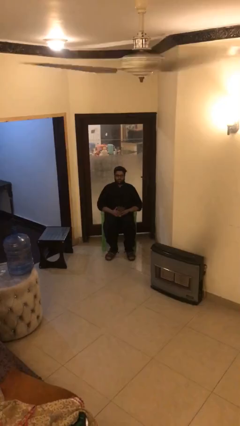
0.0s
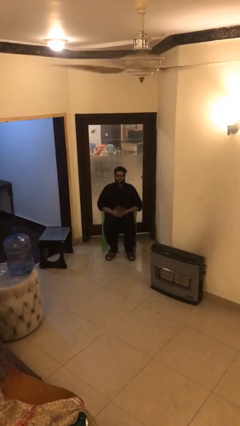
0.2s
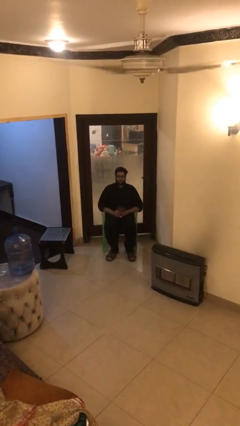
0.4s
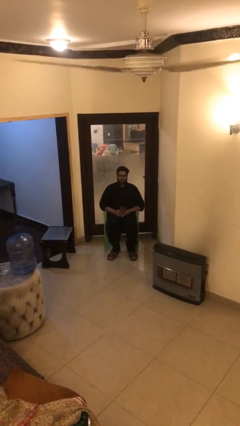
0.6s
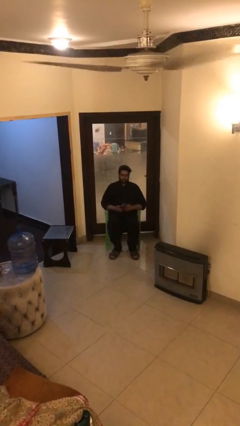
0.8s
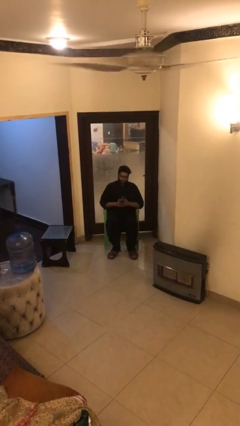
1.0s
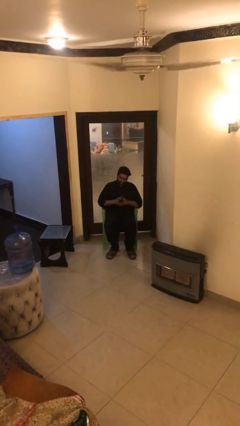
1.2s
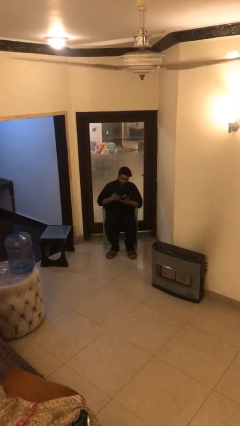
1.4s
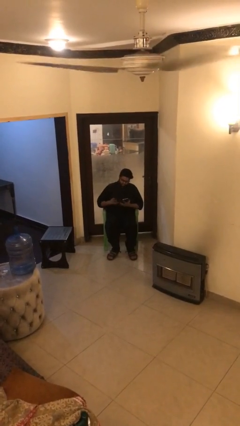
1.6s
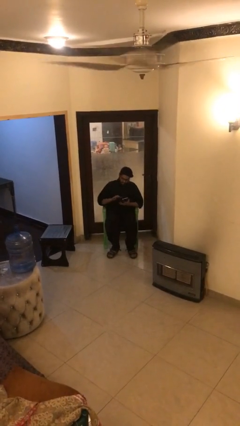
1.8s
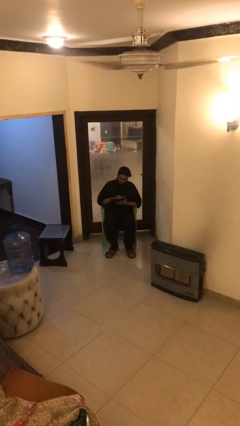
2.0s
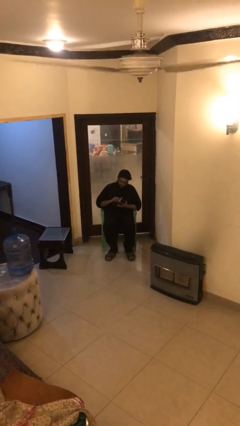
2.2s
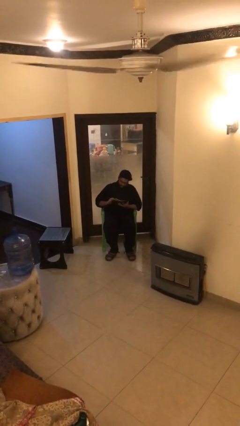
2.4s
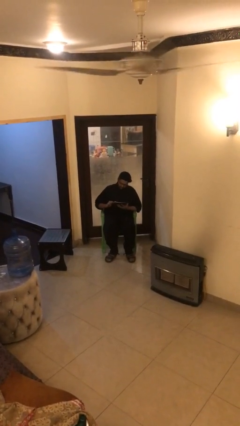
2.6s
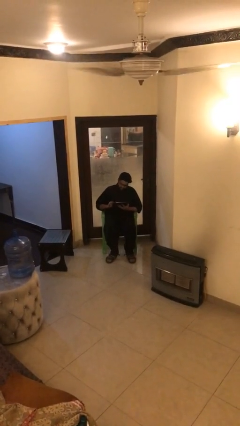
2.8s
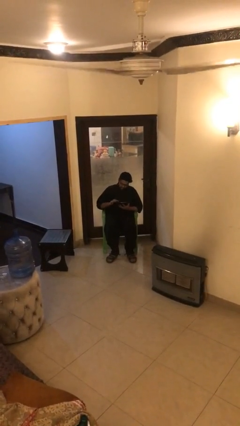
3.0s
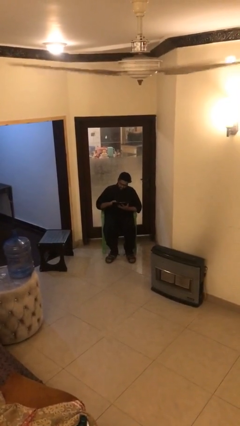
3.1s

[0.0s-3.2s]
person reads document

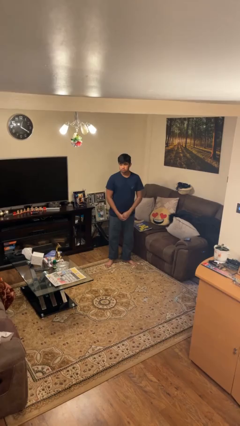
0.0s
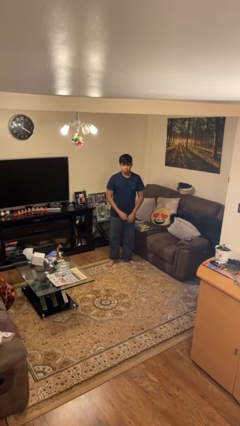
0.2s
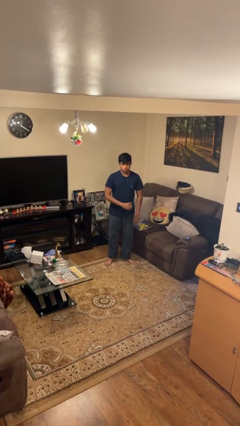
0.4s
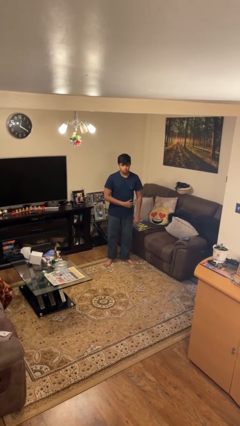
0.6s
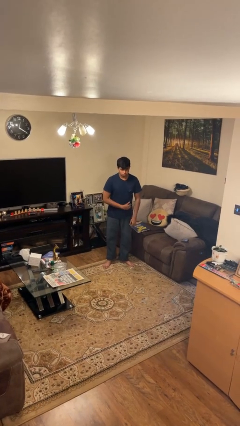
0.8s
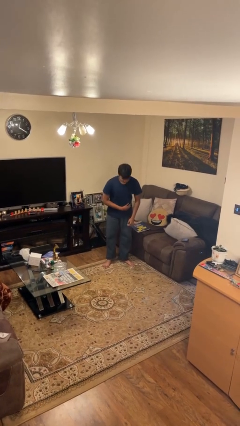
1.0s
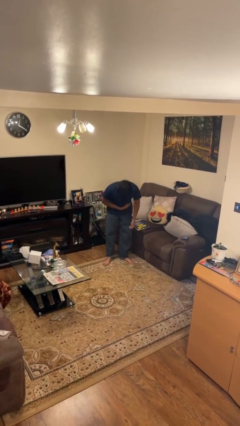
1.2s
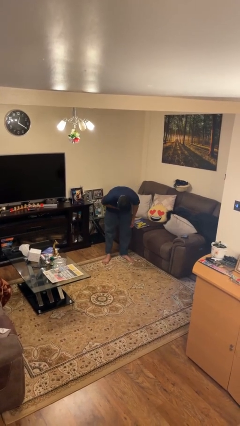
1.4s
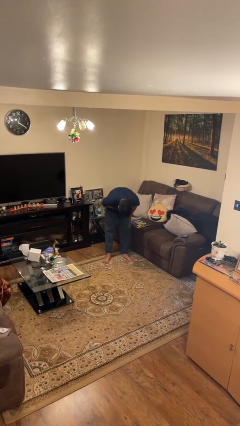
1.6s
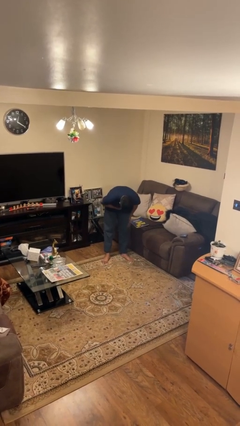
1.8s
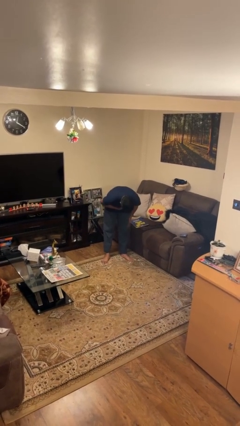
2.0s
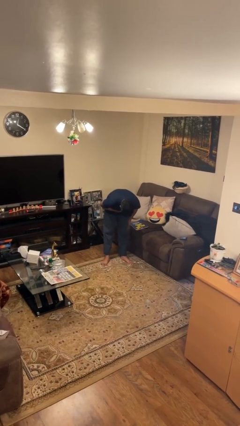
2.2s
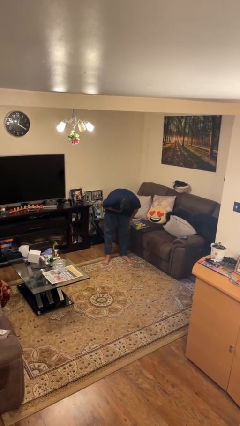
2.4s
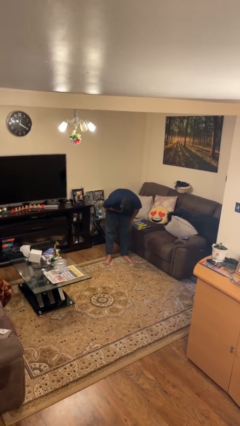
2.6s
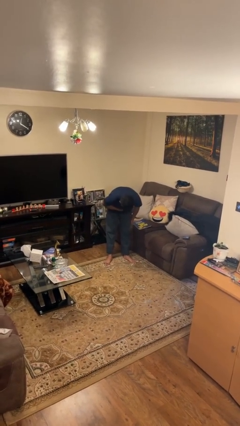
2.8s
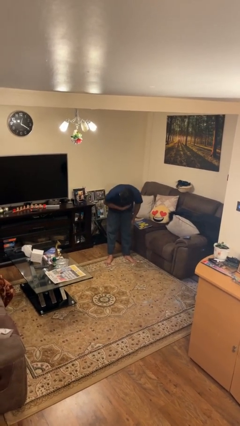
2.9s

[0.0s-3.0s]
person bows

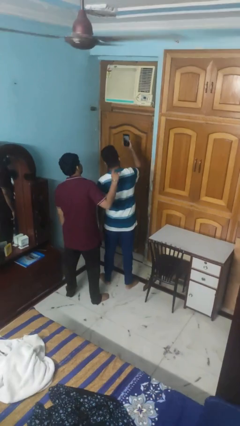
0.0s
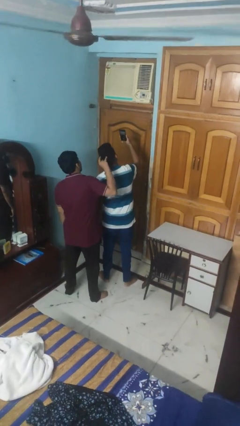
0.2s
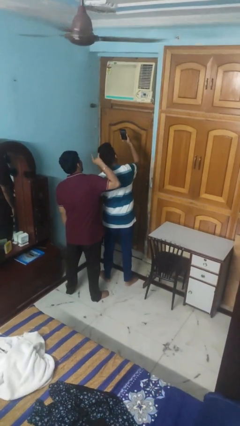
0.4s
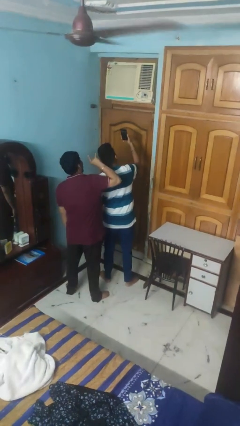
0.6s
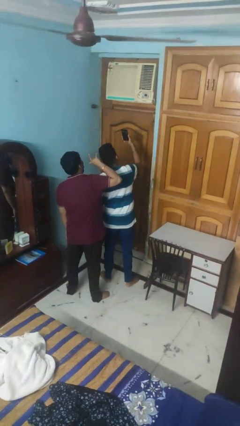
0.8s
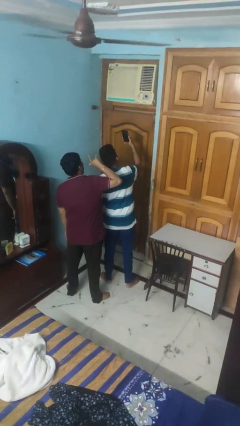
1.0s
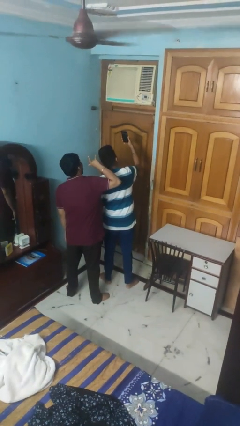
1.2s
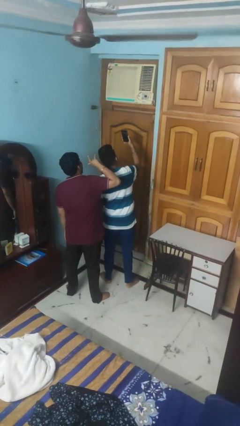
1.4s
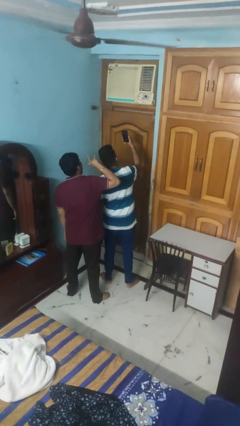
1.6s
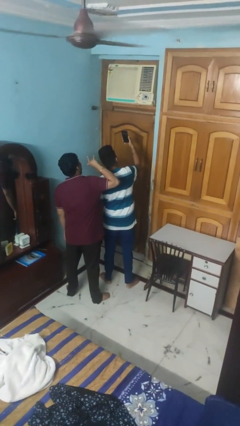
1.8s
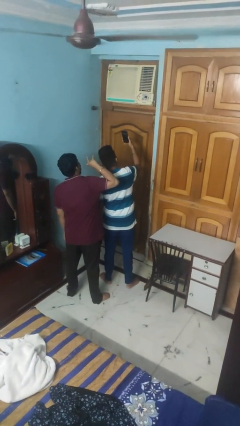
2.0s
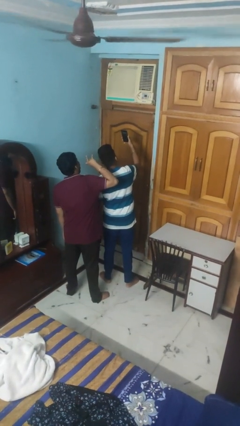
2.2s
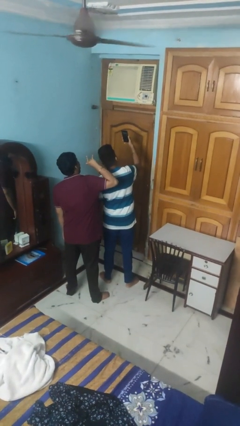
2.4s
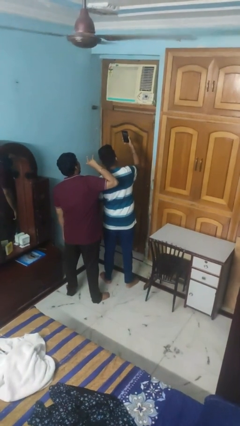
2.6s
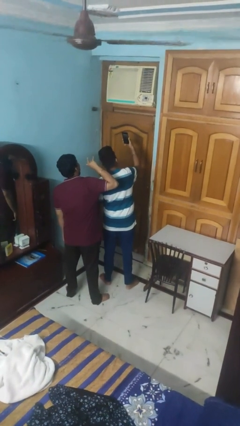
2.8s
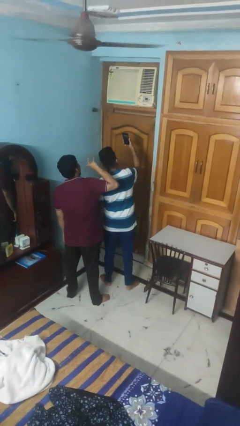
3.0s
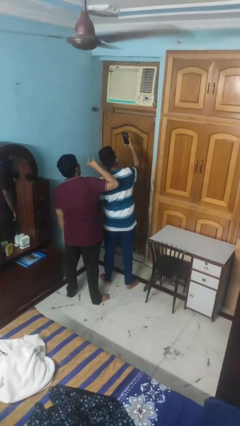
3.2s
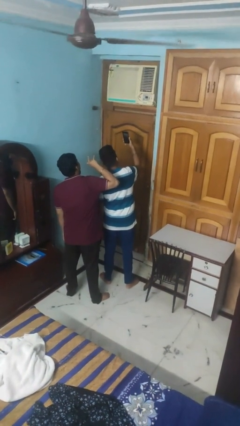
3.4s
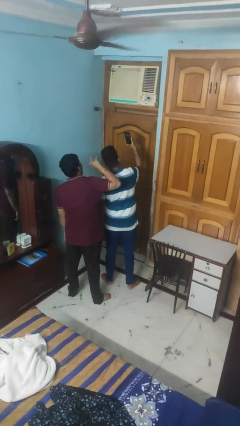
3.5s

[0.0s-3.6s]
person takes selfie with person

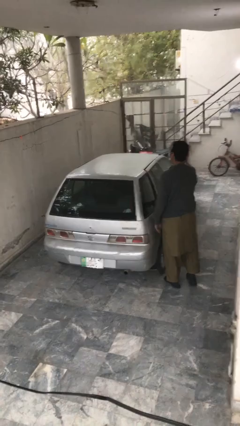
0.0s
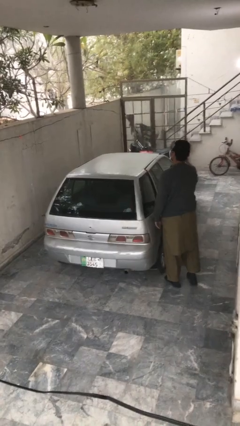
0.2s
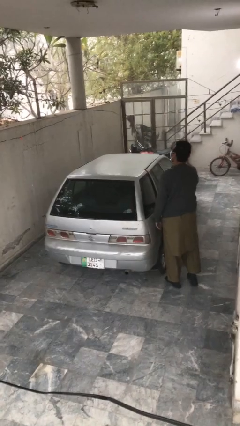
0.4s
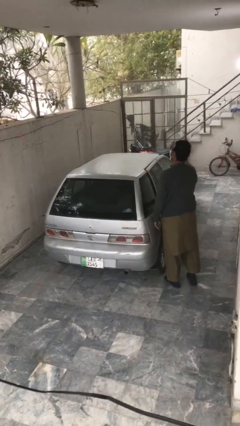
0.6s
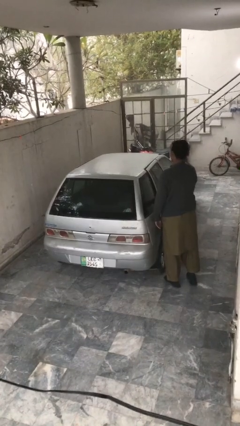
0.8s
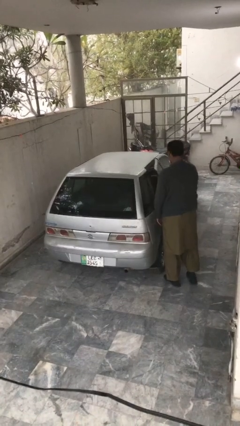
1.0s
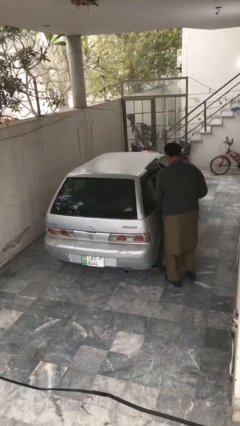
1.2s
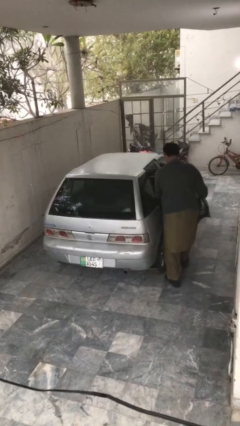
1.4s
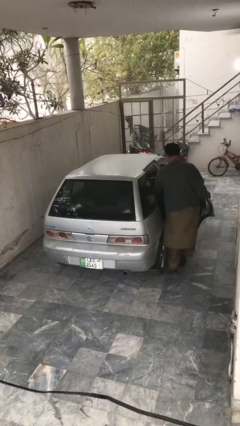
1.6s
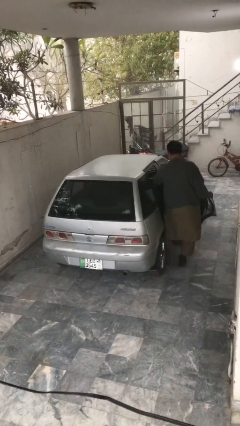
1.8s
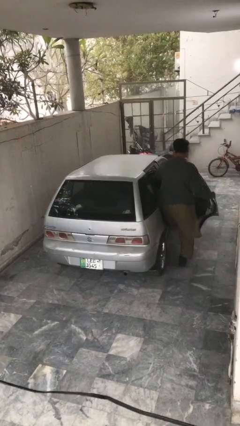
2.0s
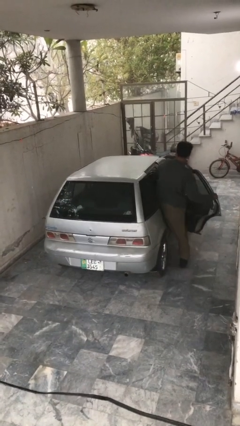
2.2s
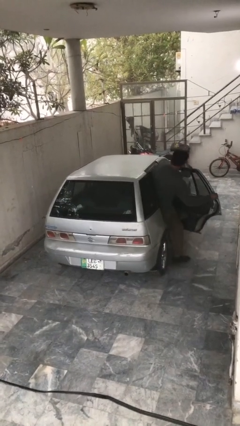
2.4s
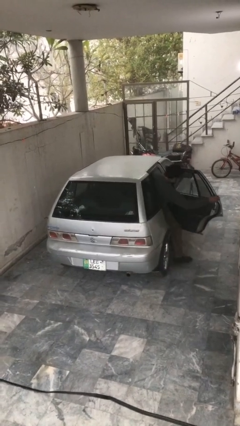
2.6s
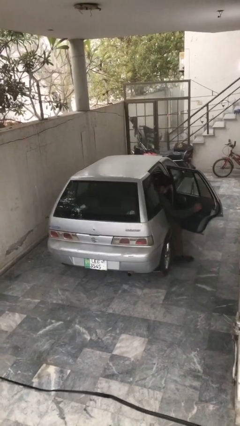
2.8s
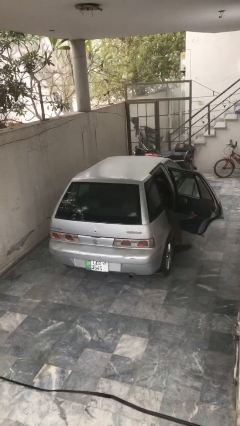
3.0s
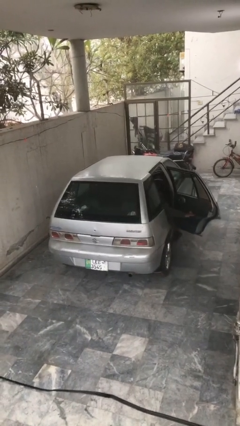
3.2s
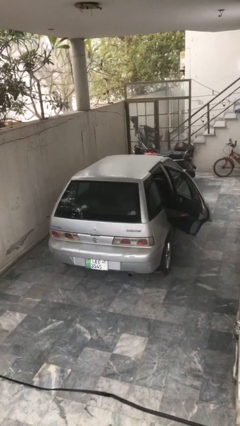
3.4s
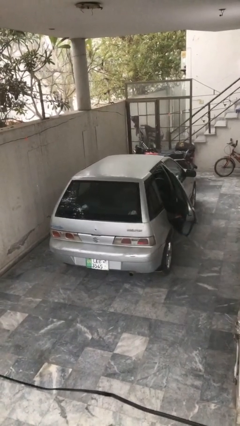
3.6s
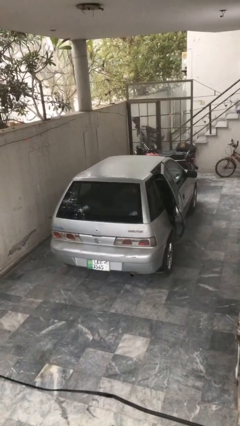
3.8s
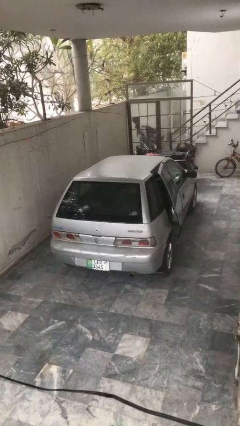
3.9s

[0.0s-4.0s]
car picks up person

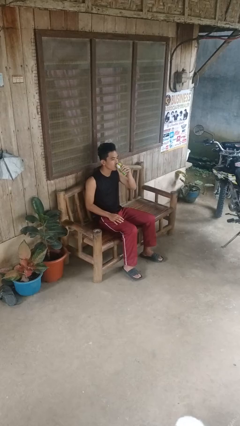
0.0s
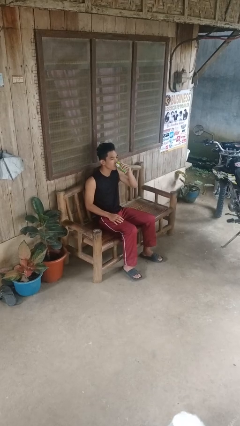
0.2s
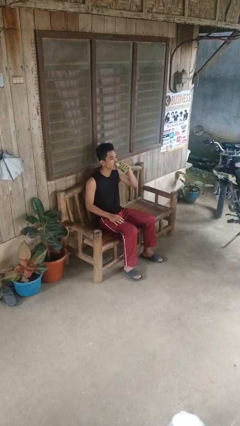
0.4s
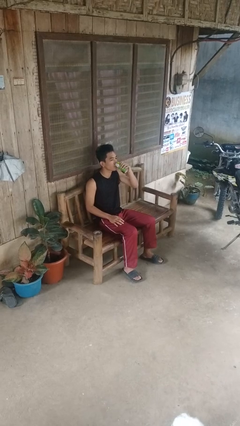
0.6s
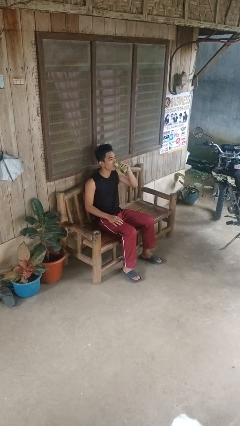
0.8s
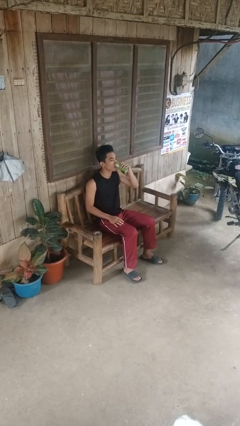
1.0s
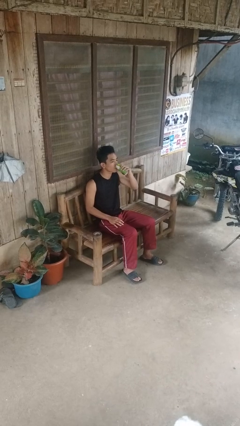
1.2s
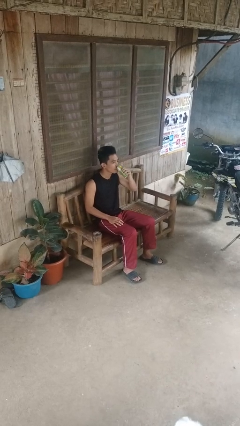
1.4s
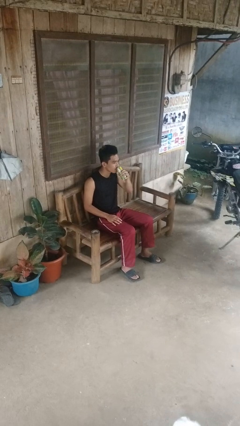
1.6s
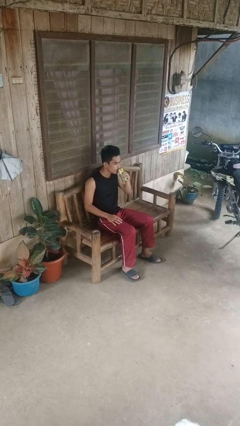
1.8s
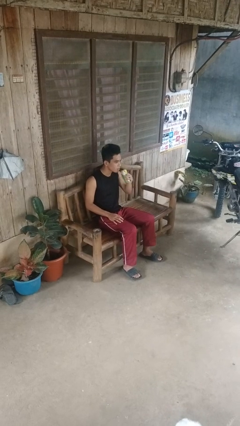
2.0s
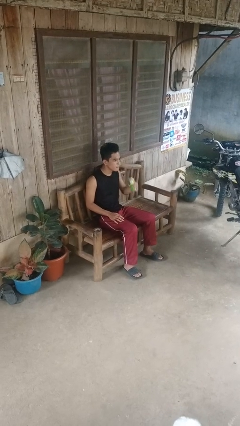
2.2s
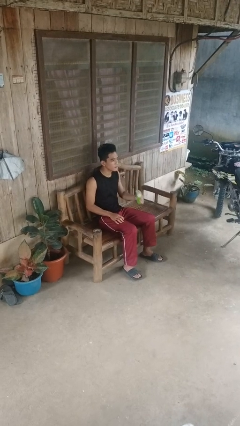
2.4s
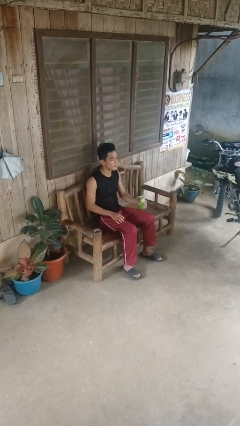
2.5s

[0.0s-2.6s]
person drinks from beverage can

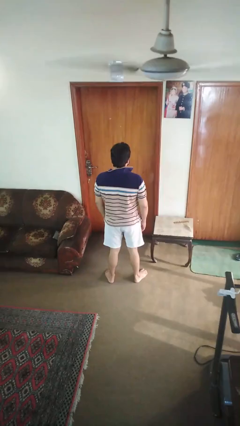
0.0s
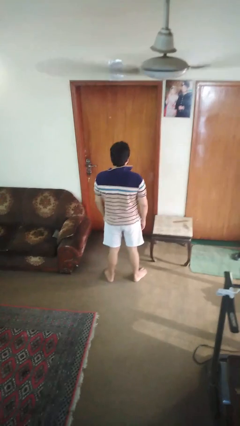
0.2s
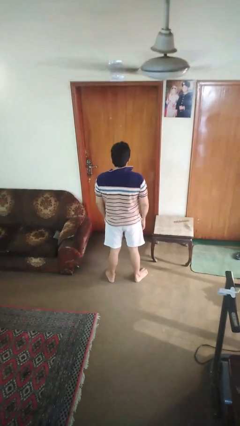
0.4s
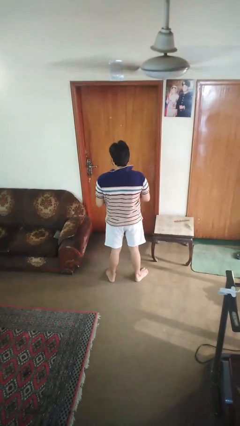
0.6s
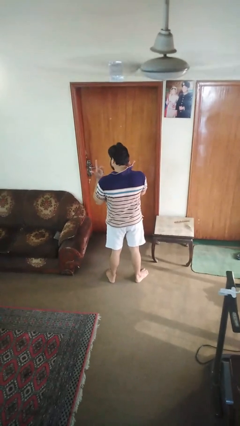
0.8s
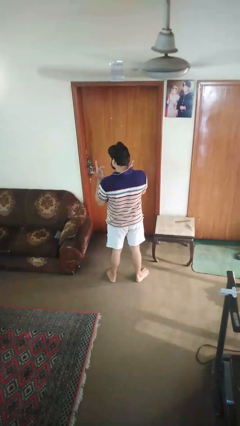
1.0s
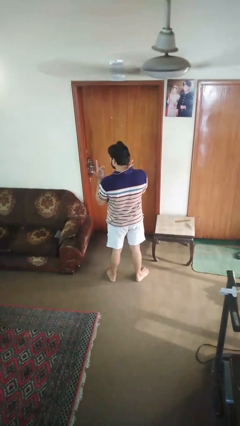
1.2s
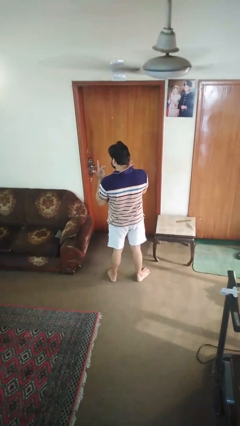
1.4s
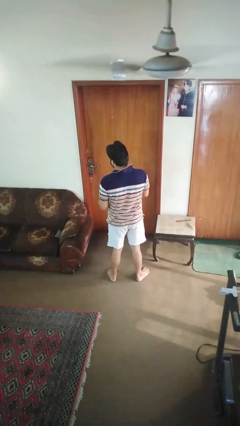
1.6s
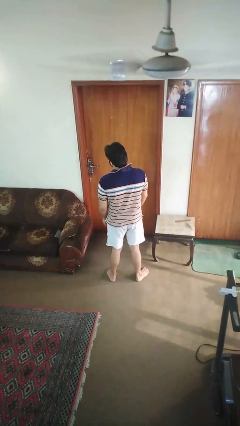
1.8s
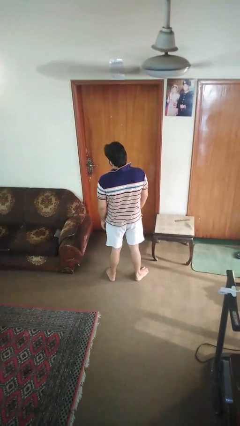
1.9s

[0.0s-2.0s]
person shrugs
